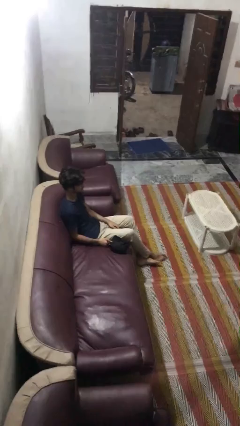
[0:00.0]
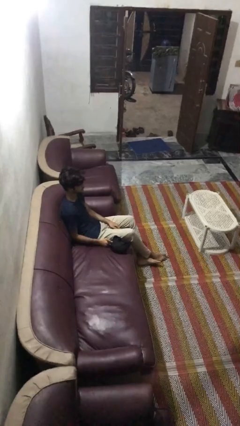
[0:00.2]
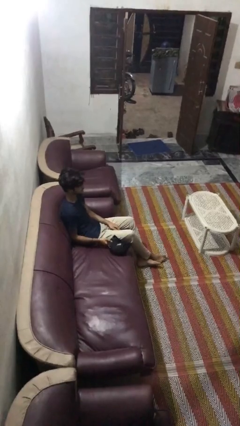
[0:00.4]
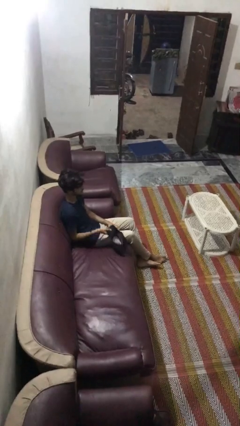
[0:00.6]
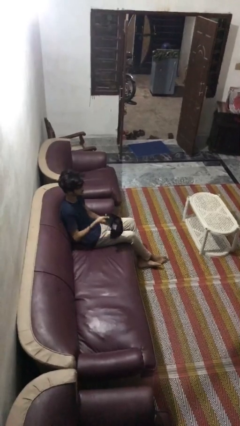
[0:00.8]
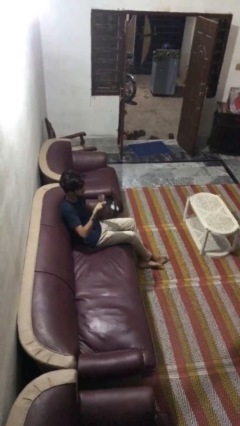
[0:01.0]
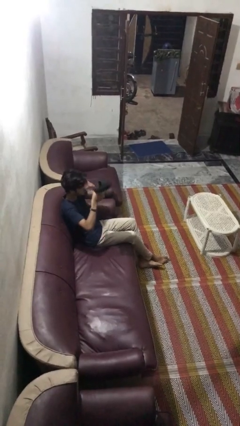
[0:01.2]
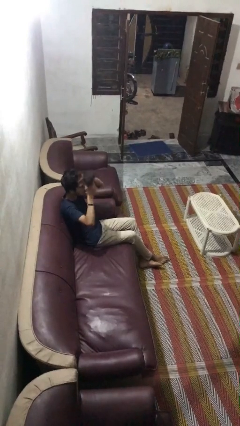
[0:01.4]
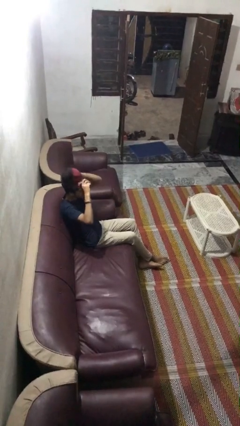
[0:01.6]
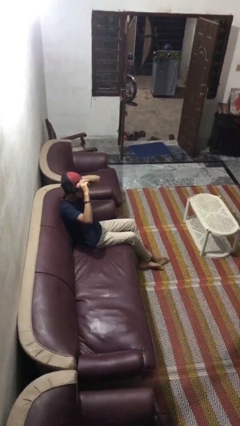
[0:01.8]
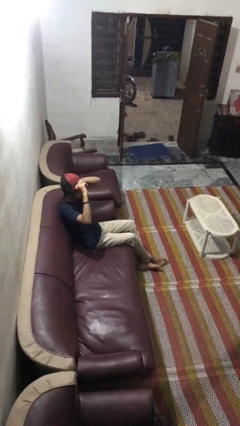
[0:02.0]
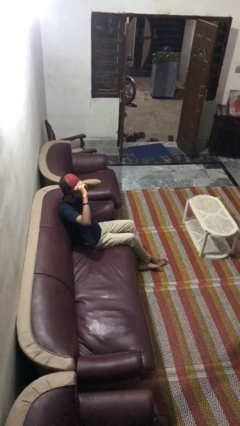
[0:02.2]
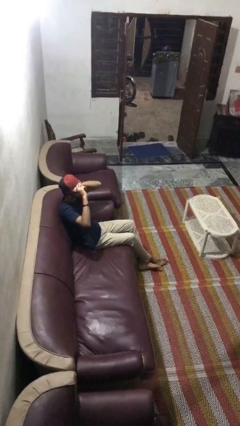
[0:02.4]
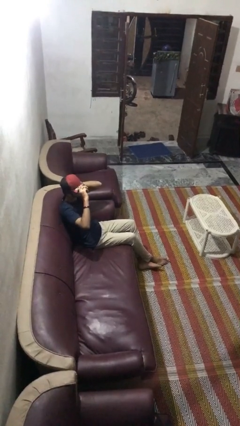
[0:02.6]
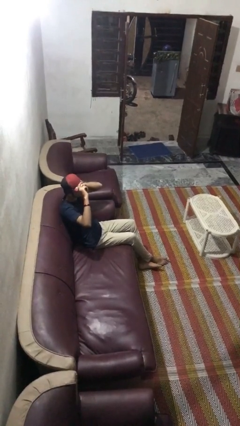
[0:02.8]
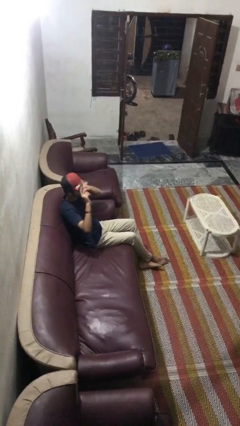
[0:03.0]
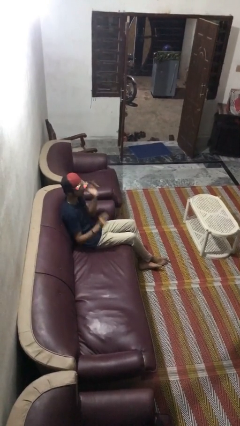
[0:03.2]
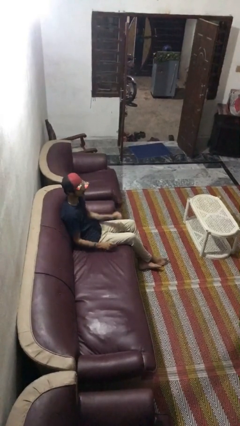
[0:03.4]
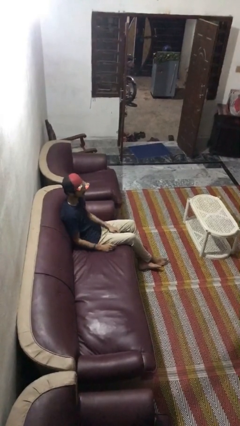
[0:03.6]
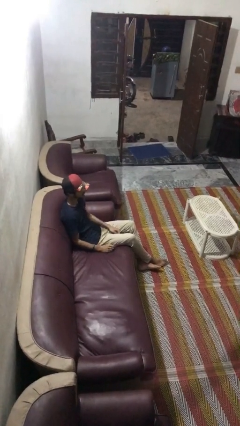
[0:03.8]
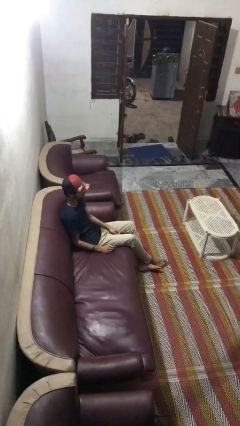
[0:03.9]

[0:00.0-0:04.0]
person puts on hat

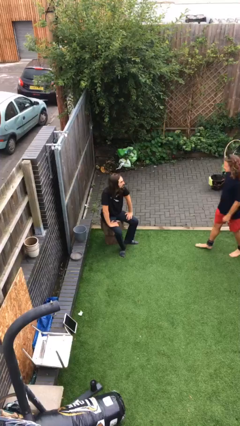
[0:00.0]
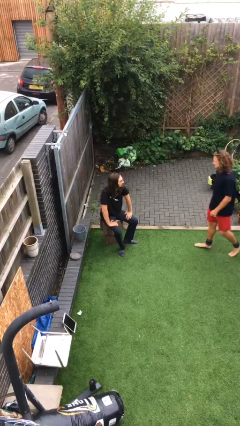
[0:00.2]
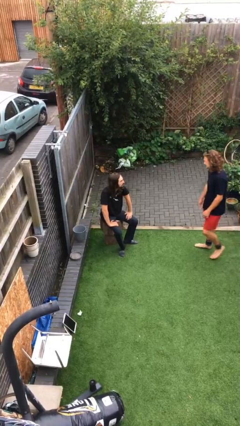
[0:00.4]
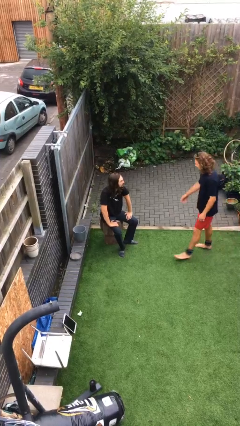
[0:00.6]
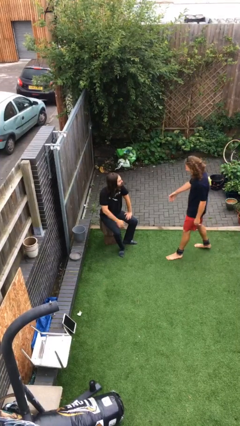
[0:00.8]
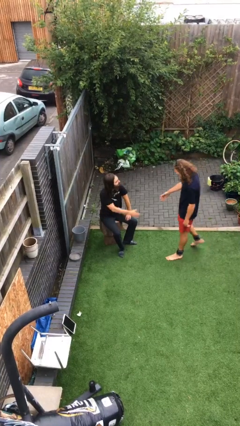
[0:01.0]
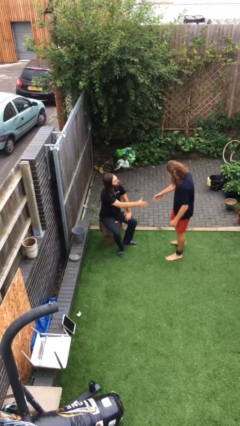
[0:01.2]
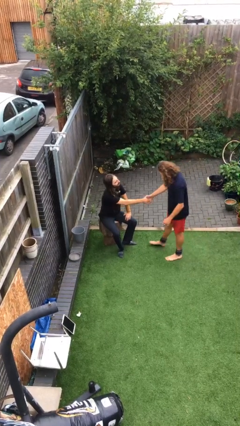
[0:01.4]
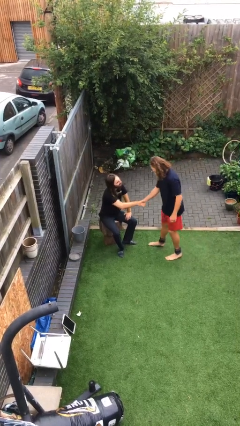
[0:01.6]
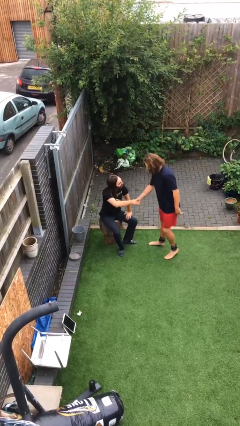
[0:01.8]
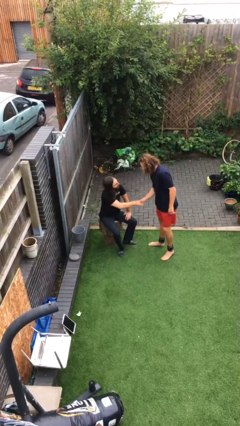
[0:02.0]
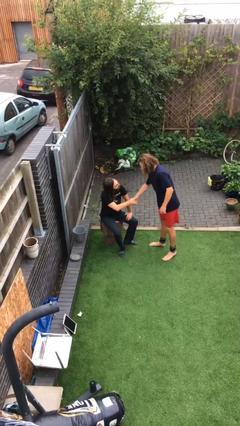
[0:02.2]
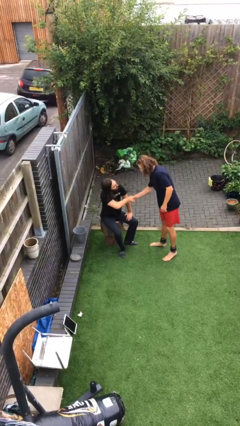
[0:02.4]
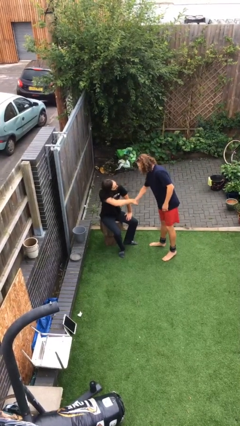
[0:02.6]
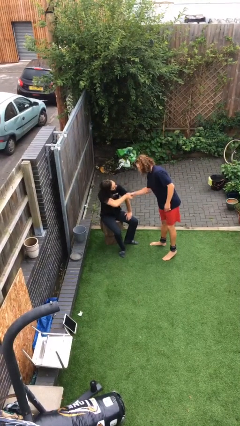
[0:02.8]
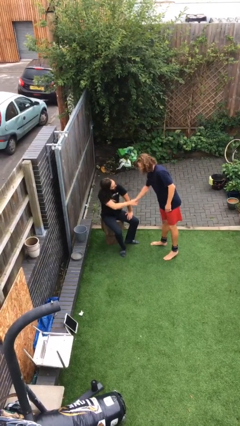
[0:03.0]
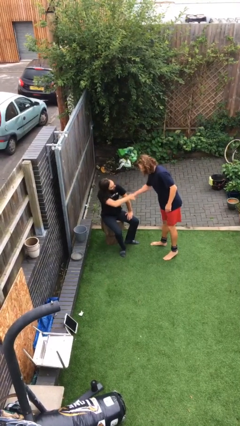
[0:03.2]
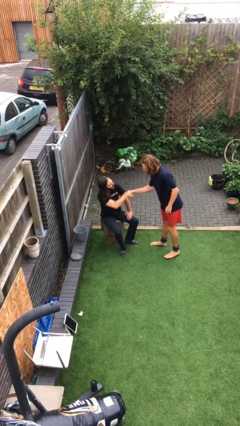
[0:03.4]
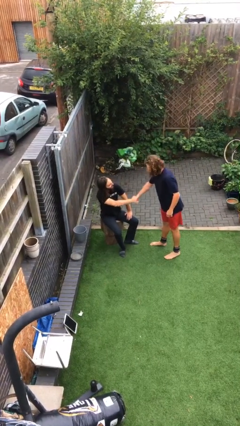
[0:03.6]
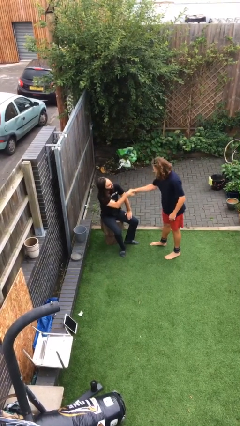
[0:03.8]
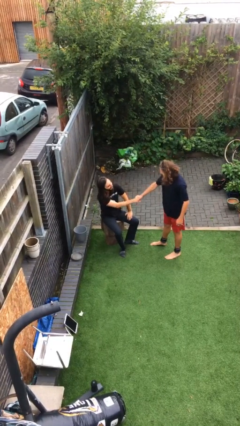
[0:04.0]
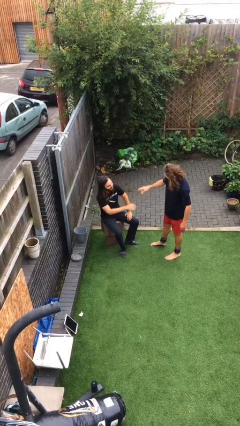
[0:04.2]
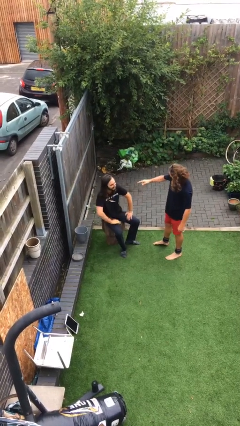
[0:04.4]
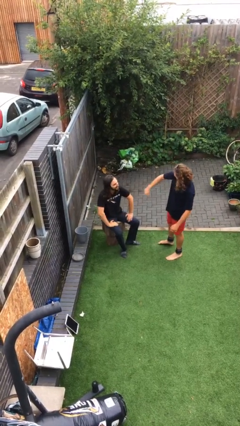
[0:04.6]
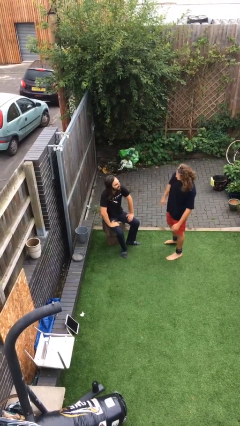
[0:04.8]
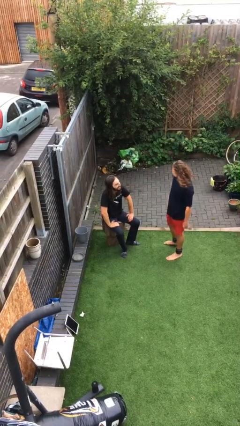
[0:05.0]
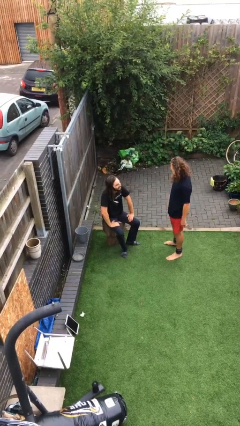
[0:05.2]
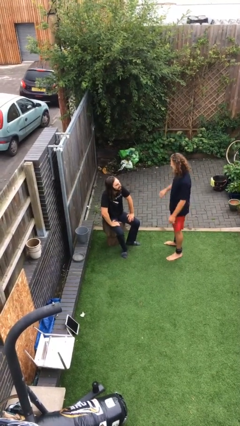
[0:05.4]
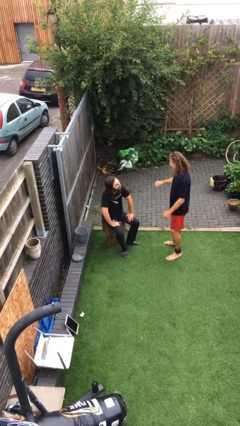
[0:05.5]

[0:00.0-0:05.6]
person shakes hand

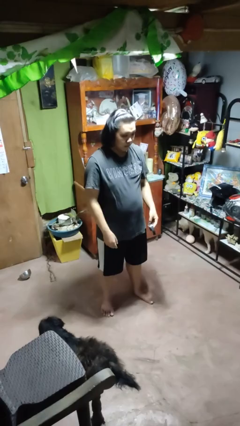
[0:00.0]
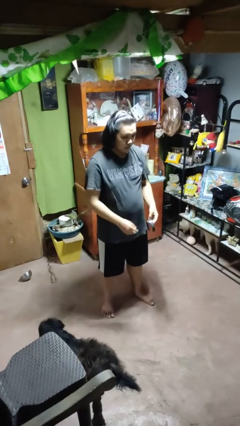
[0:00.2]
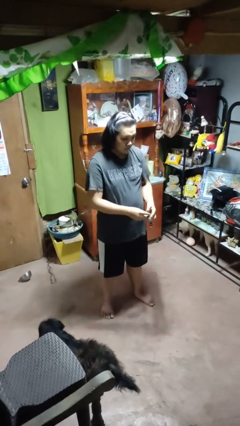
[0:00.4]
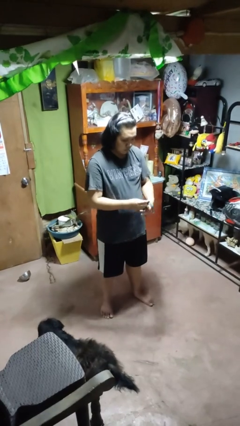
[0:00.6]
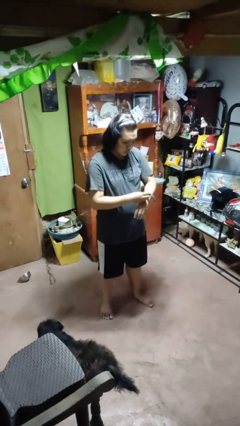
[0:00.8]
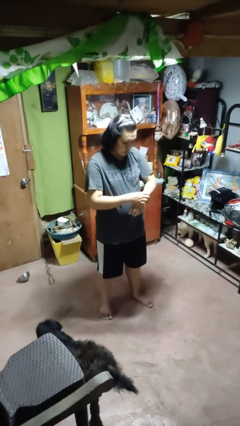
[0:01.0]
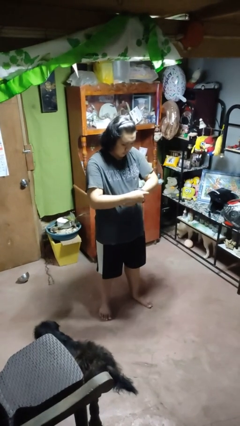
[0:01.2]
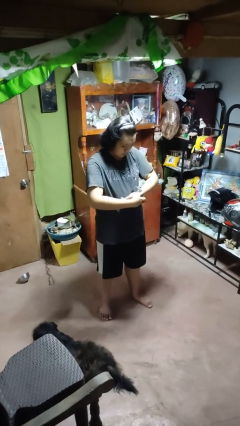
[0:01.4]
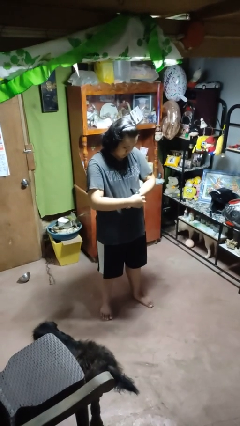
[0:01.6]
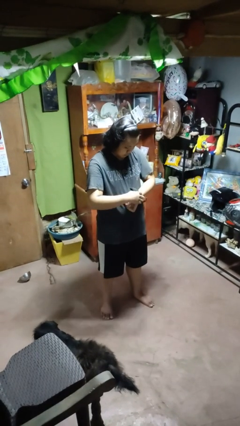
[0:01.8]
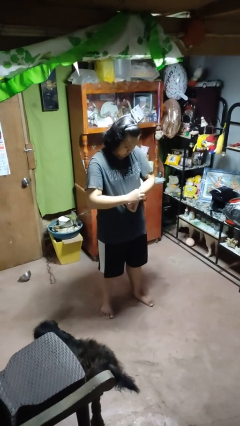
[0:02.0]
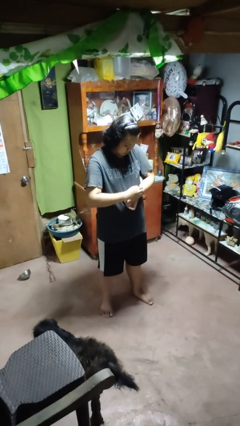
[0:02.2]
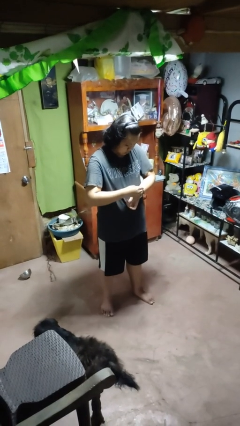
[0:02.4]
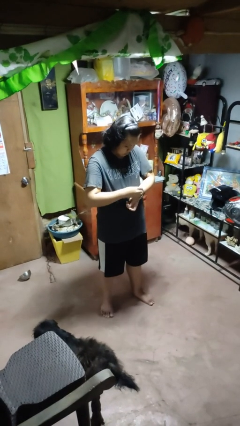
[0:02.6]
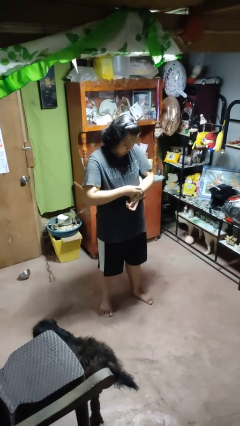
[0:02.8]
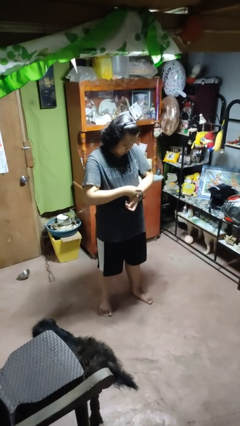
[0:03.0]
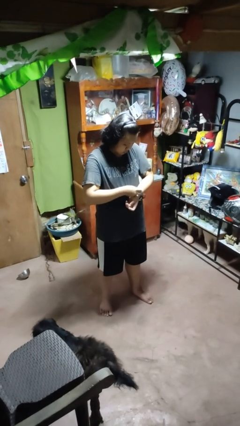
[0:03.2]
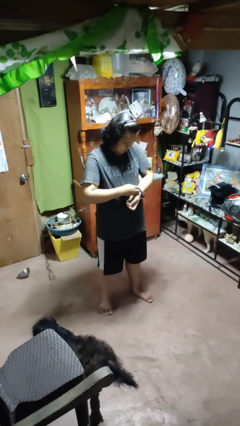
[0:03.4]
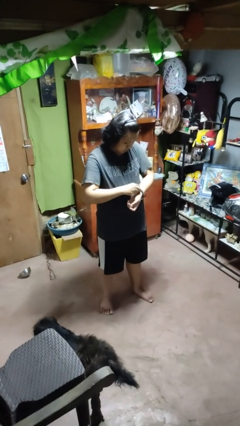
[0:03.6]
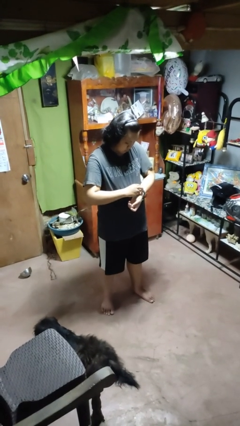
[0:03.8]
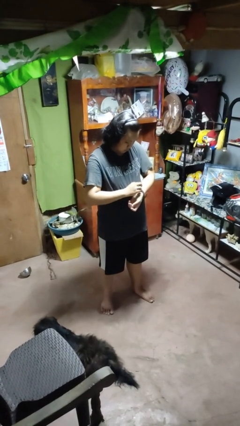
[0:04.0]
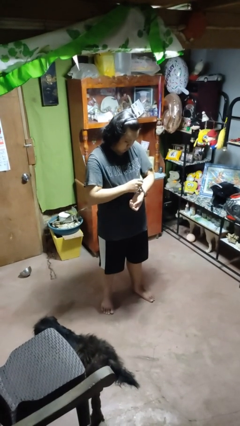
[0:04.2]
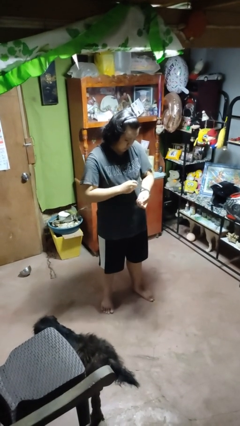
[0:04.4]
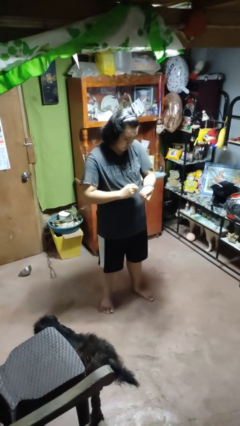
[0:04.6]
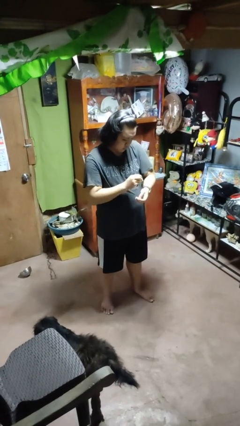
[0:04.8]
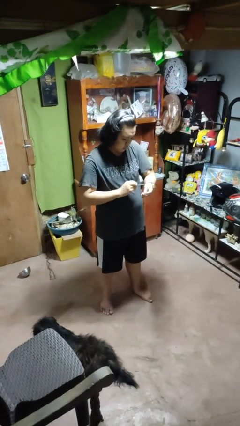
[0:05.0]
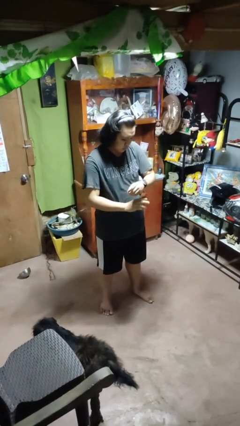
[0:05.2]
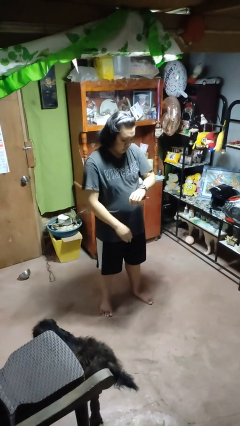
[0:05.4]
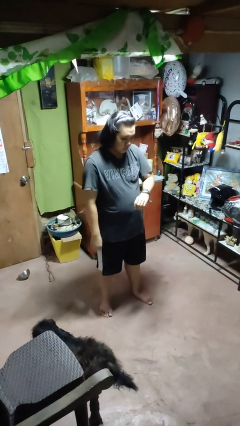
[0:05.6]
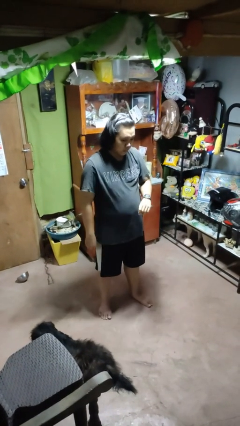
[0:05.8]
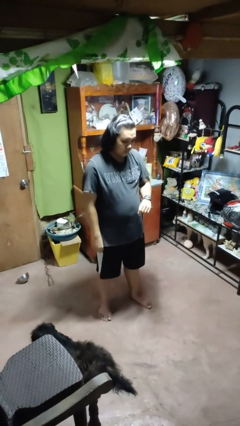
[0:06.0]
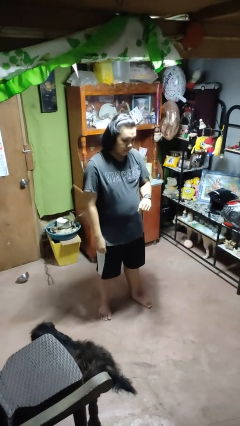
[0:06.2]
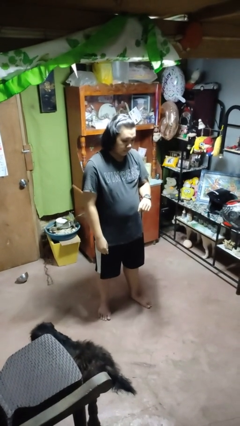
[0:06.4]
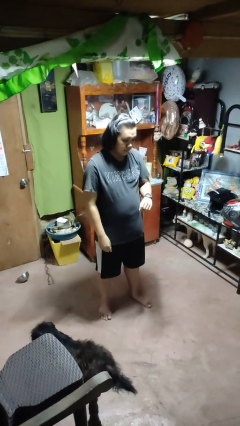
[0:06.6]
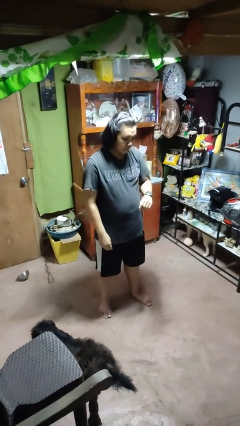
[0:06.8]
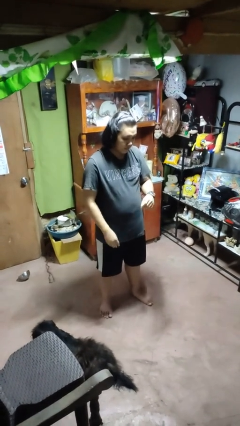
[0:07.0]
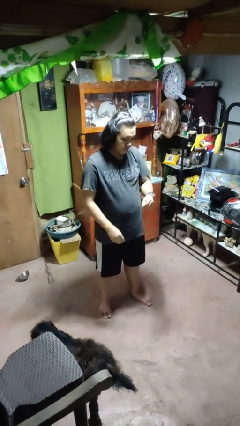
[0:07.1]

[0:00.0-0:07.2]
person puts on wristwatch

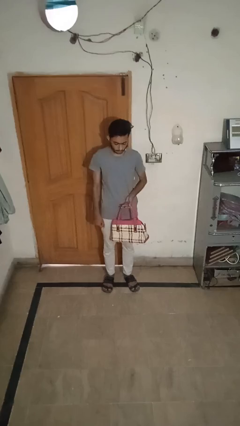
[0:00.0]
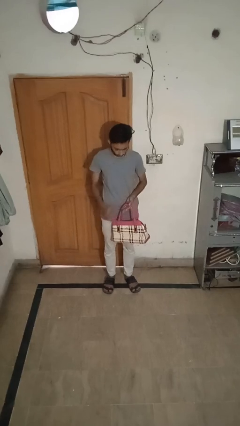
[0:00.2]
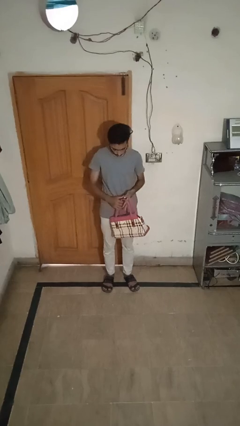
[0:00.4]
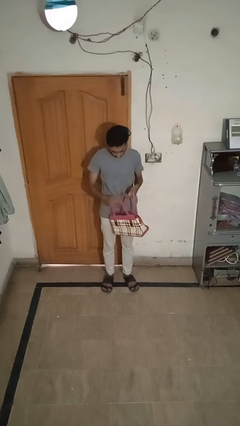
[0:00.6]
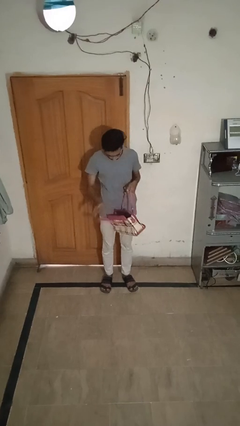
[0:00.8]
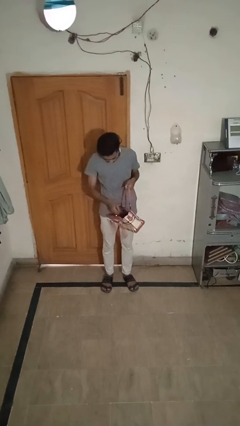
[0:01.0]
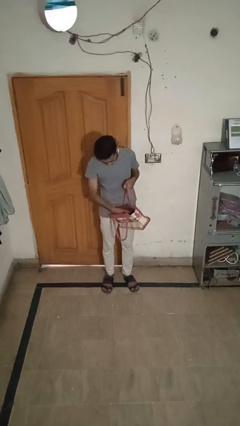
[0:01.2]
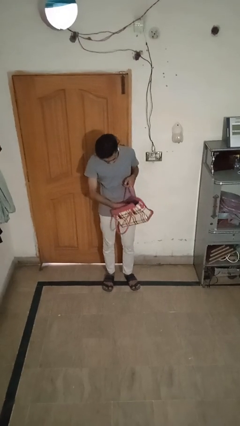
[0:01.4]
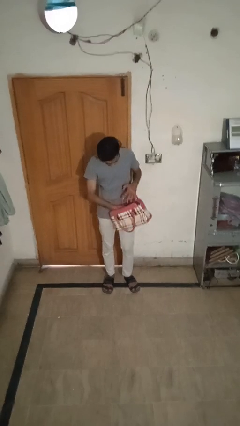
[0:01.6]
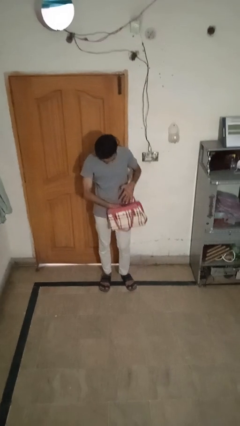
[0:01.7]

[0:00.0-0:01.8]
person searches in purse
